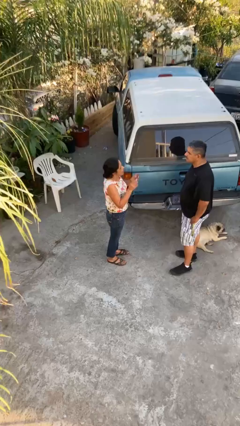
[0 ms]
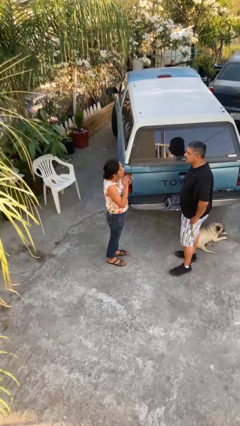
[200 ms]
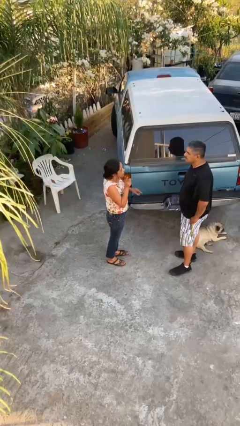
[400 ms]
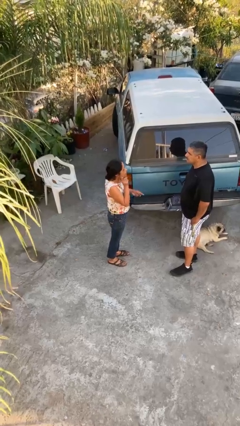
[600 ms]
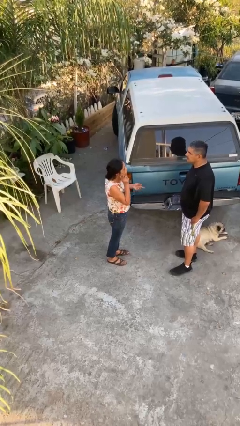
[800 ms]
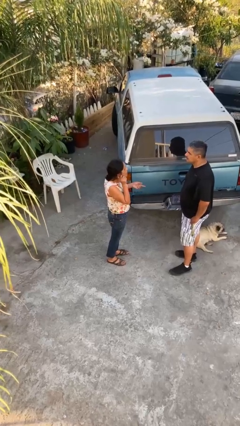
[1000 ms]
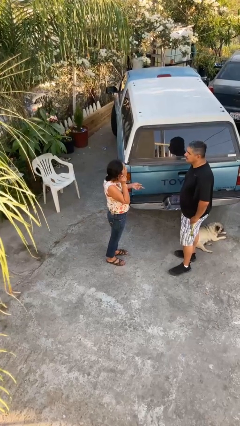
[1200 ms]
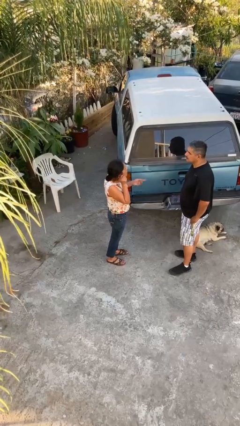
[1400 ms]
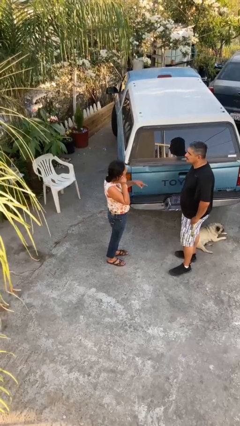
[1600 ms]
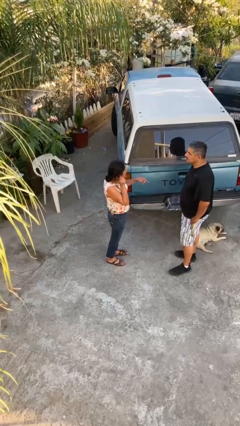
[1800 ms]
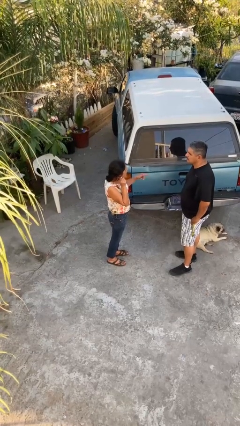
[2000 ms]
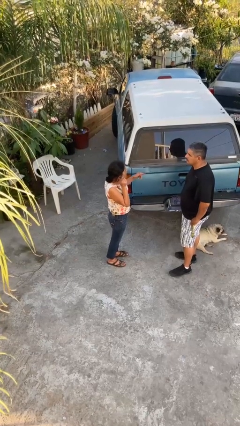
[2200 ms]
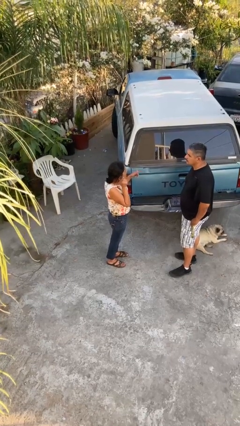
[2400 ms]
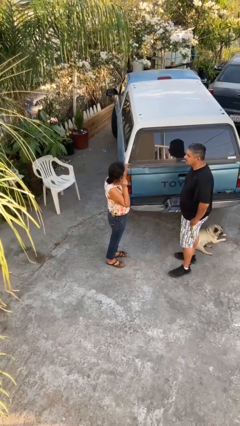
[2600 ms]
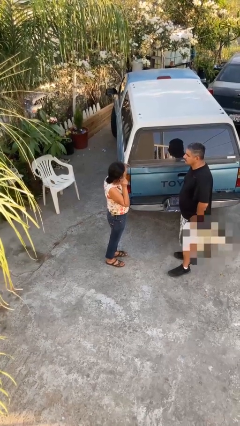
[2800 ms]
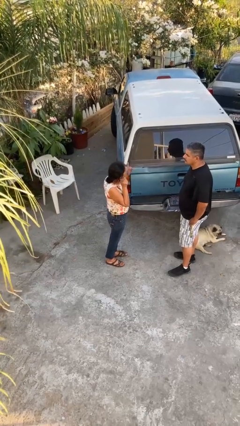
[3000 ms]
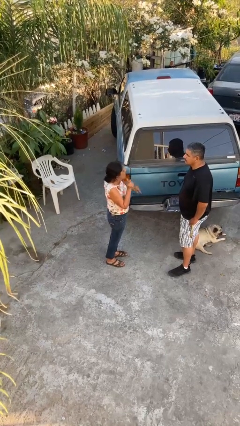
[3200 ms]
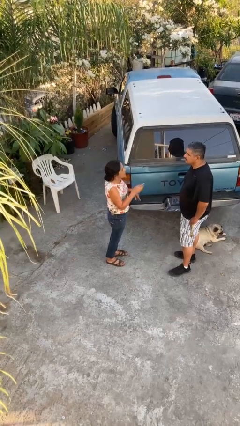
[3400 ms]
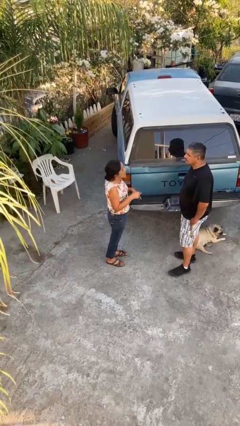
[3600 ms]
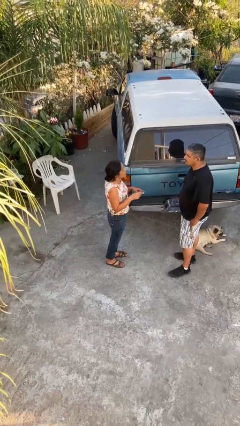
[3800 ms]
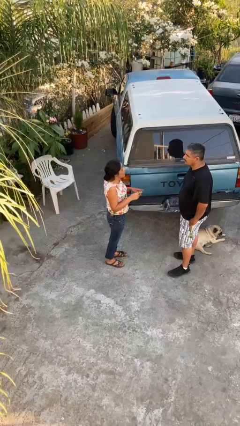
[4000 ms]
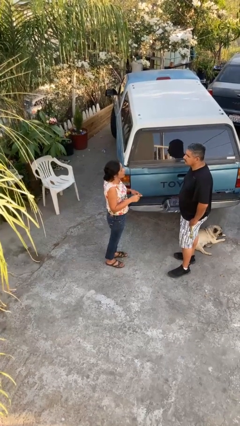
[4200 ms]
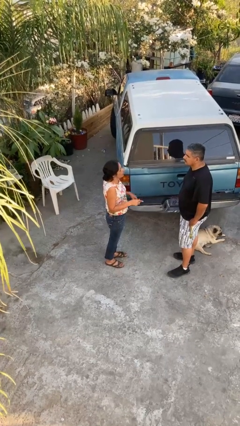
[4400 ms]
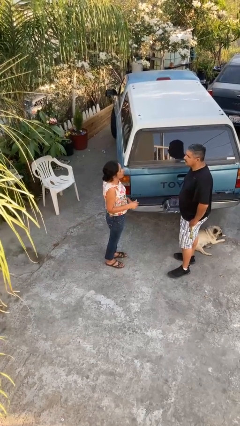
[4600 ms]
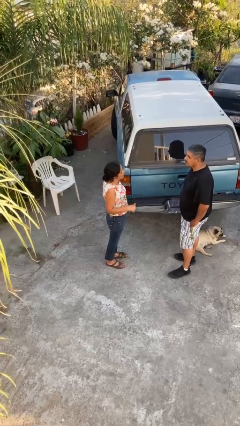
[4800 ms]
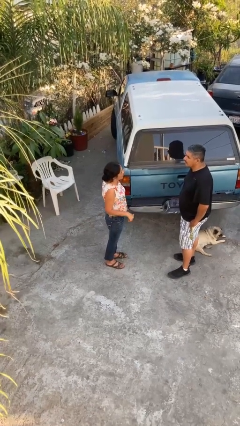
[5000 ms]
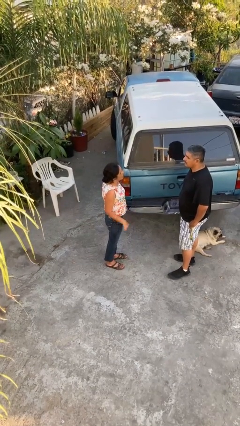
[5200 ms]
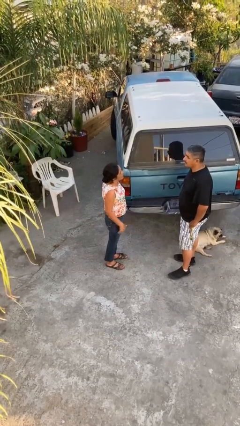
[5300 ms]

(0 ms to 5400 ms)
person talks to person

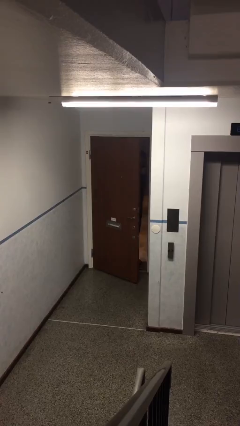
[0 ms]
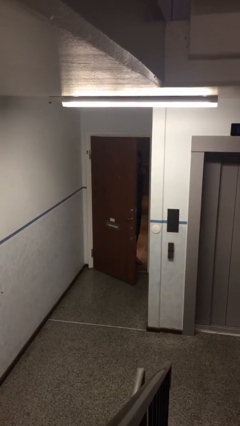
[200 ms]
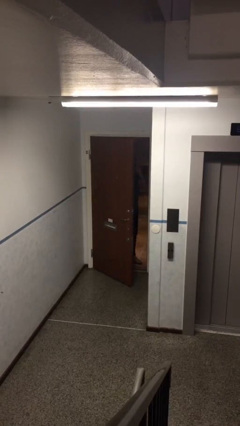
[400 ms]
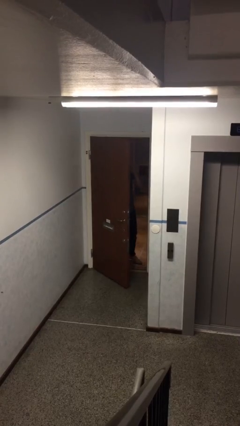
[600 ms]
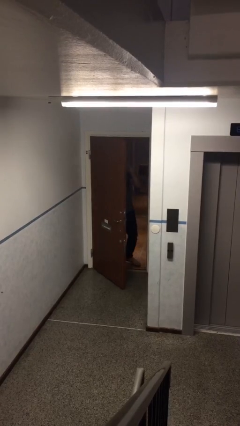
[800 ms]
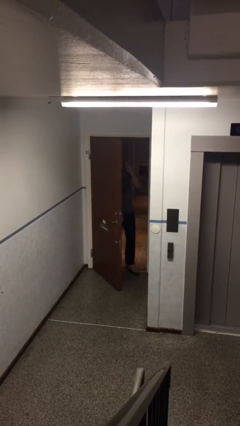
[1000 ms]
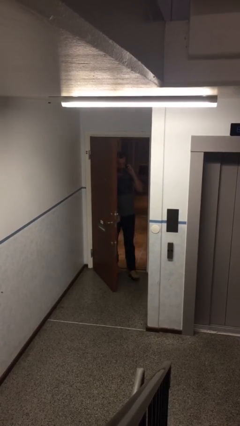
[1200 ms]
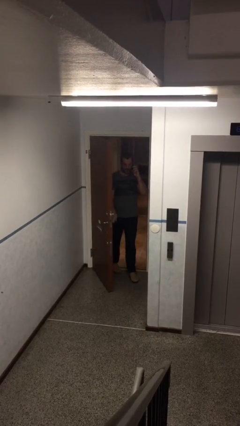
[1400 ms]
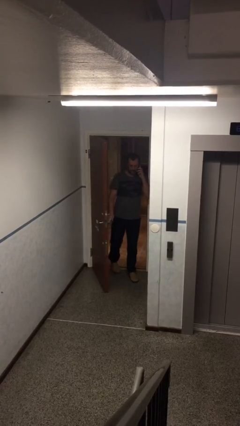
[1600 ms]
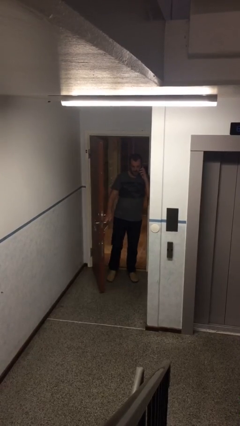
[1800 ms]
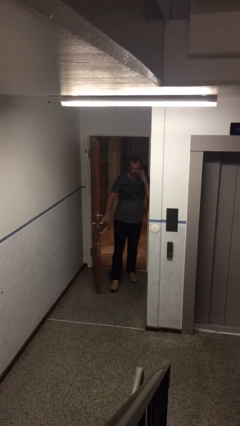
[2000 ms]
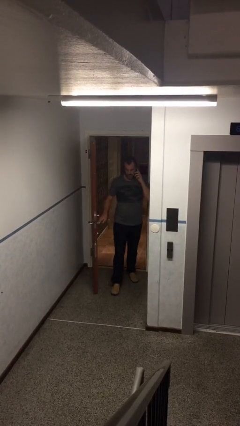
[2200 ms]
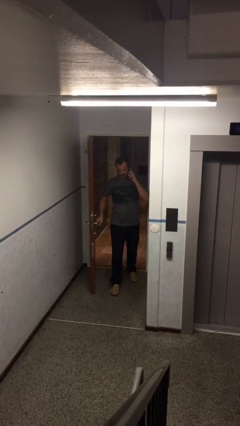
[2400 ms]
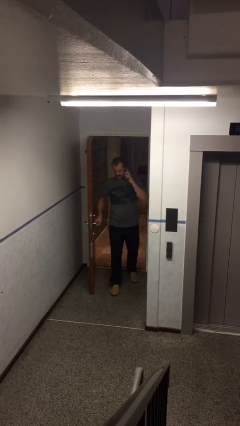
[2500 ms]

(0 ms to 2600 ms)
person opens facility door

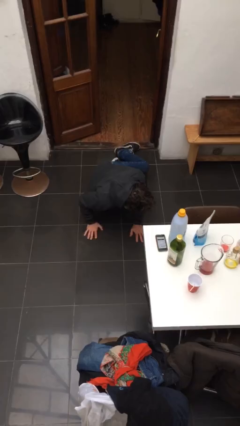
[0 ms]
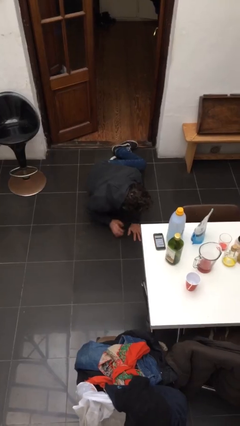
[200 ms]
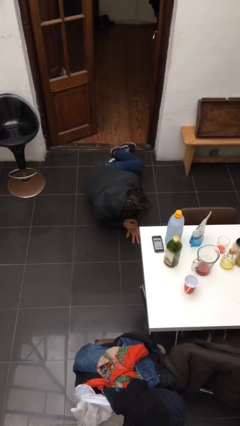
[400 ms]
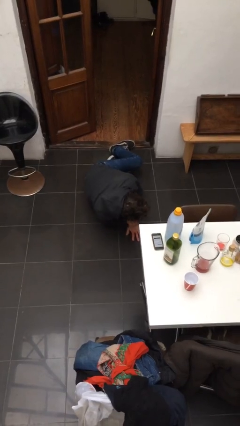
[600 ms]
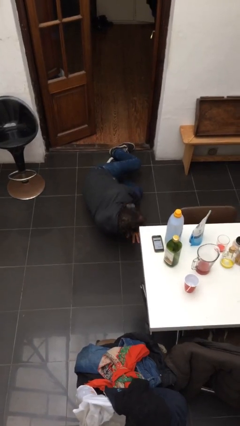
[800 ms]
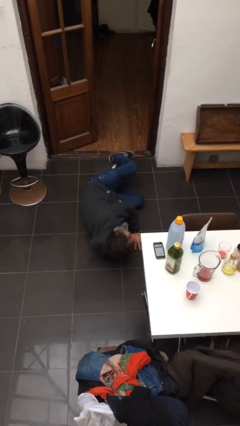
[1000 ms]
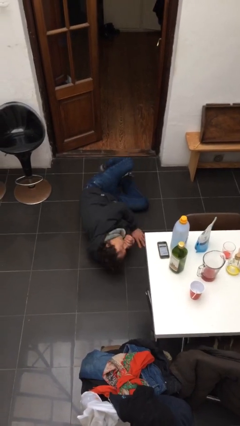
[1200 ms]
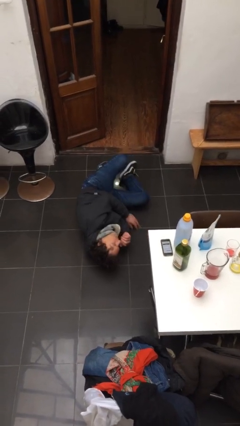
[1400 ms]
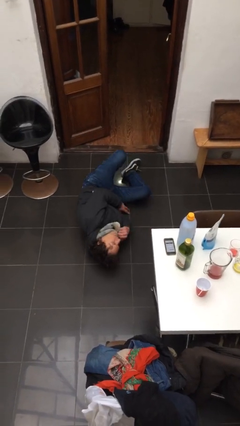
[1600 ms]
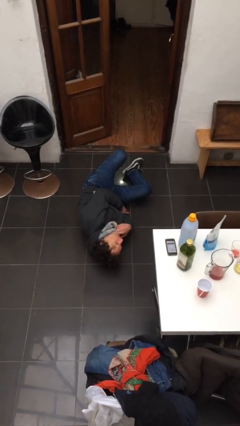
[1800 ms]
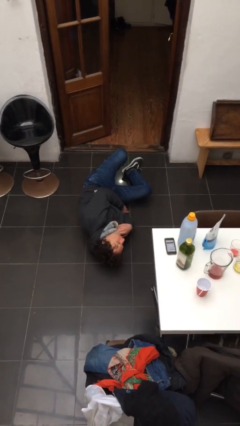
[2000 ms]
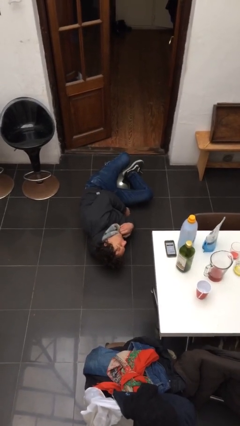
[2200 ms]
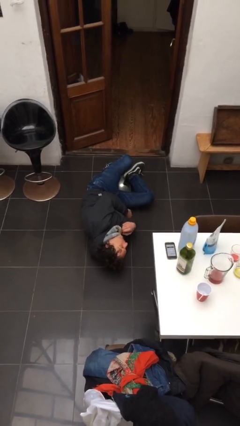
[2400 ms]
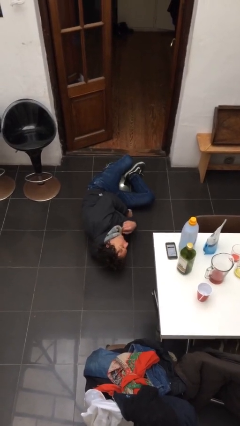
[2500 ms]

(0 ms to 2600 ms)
person lies down on floor

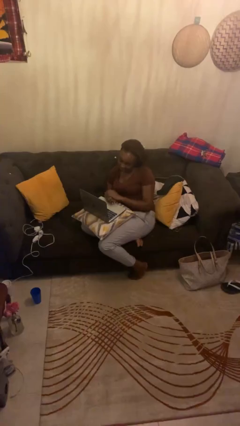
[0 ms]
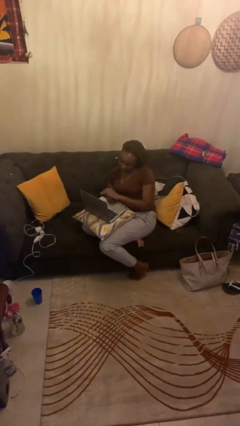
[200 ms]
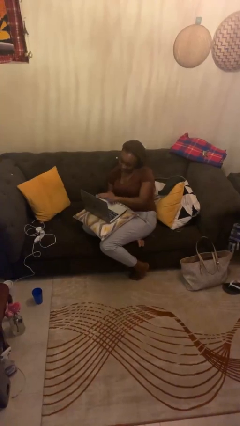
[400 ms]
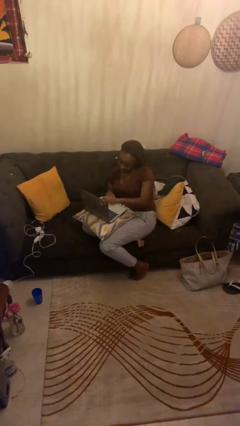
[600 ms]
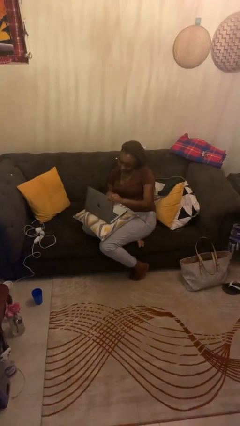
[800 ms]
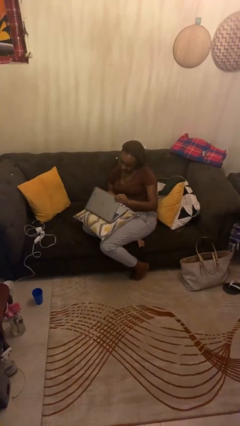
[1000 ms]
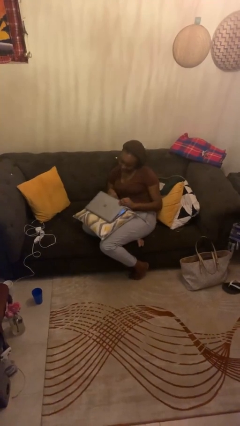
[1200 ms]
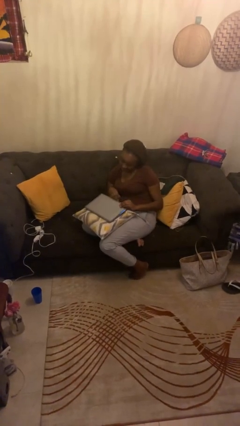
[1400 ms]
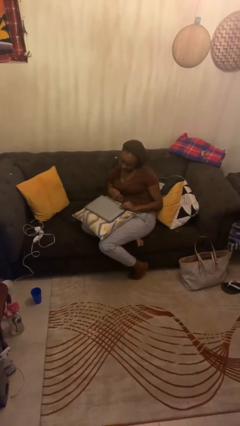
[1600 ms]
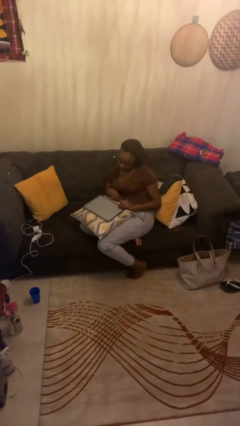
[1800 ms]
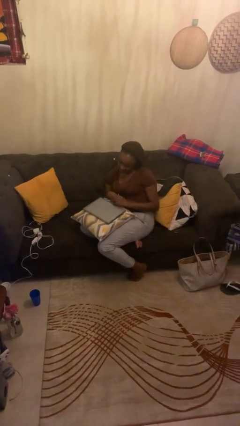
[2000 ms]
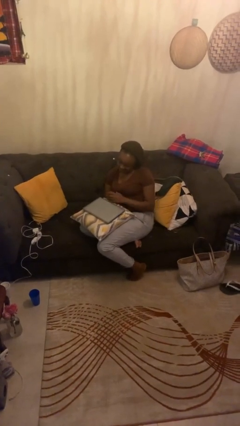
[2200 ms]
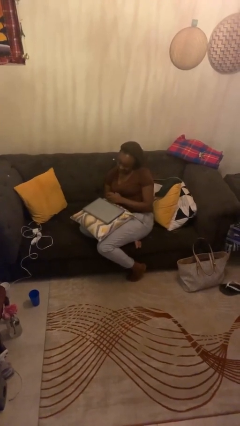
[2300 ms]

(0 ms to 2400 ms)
person closes laptop

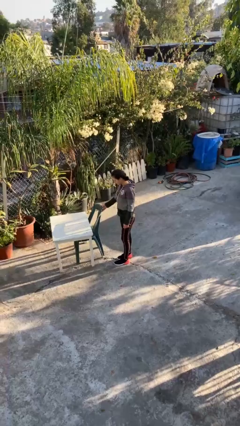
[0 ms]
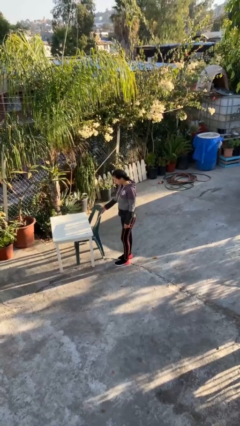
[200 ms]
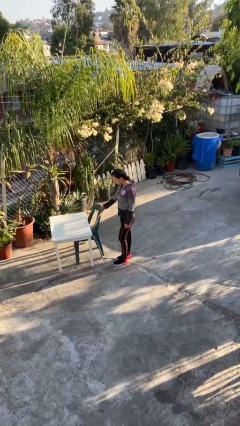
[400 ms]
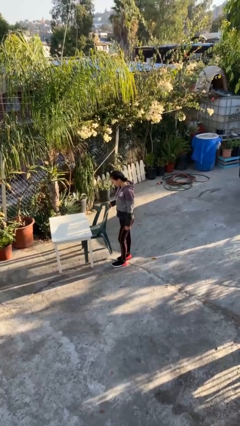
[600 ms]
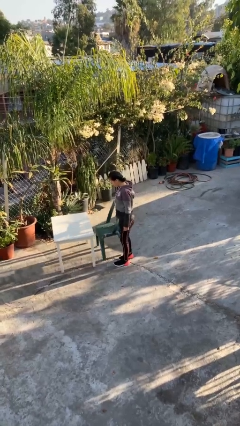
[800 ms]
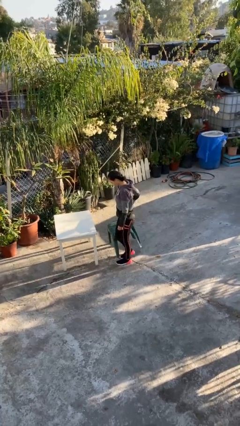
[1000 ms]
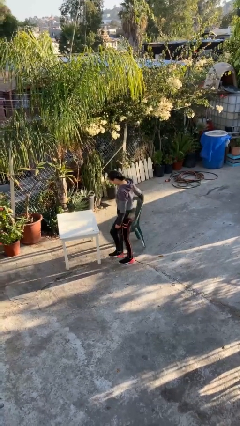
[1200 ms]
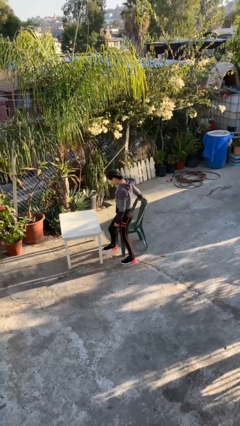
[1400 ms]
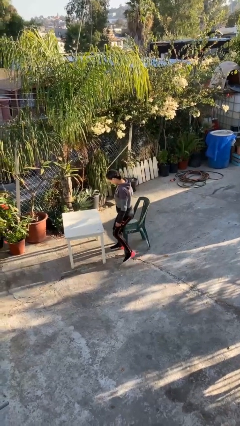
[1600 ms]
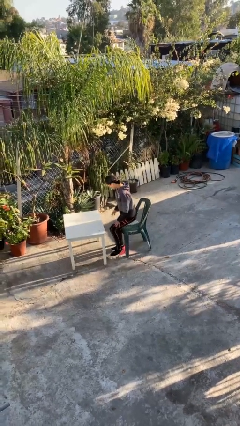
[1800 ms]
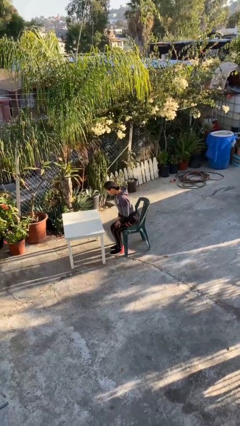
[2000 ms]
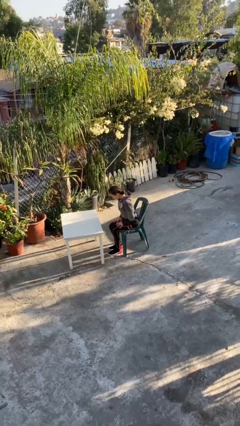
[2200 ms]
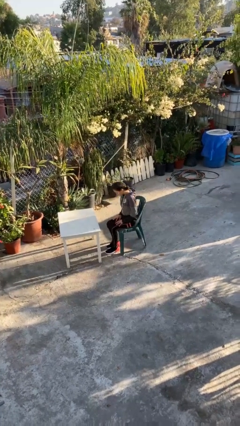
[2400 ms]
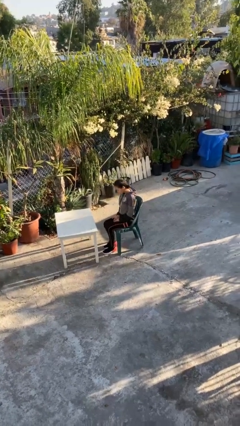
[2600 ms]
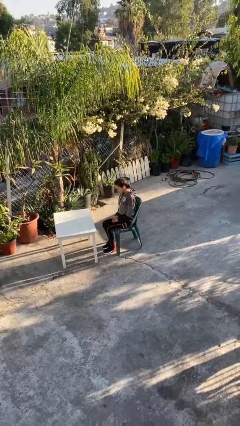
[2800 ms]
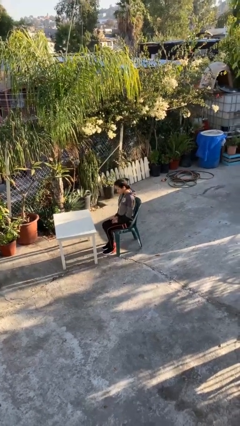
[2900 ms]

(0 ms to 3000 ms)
person sits down

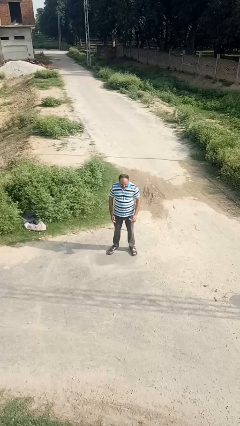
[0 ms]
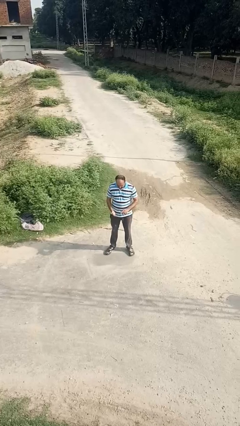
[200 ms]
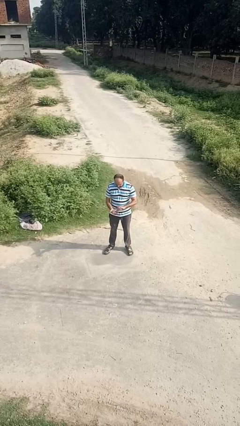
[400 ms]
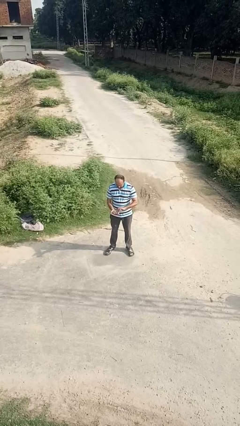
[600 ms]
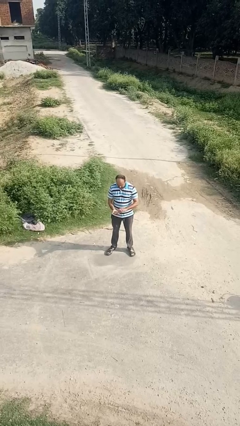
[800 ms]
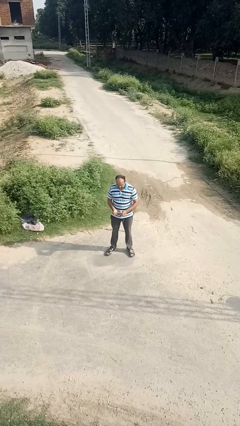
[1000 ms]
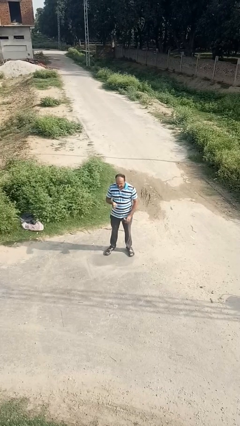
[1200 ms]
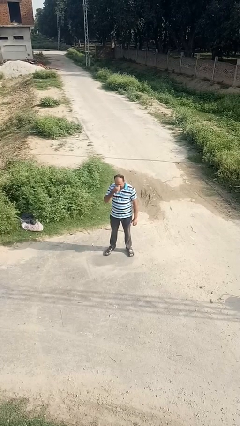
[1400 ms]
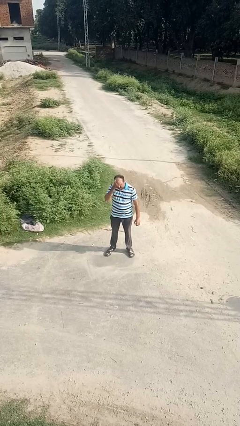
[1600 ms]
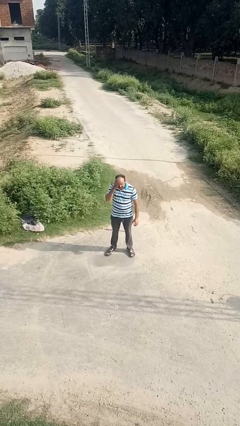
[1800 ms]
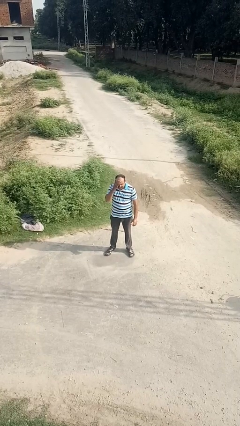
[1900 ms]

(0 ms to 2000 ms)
person applies facial moisturizer
